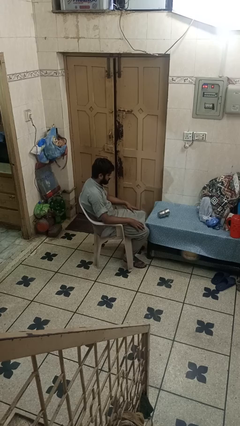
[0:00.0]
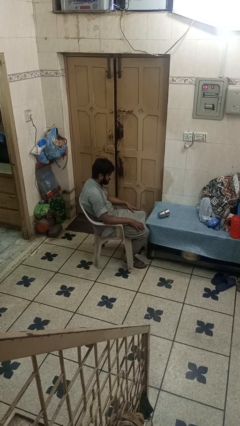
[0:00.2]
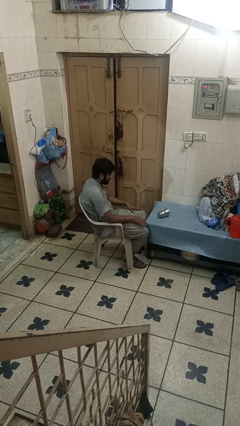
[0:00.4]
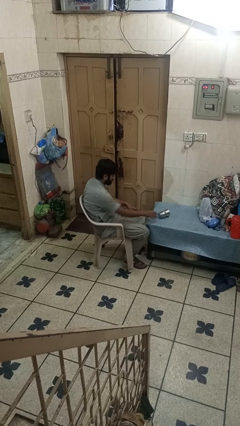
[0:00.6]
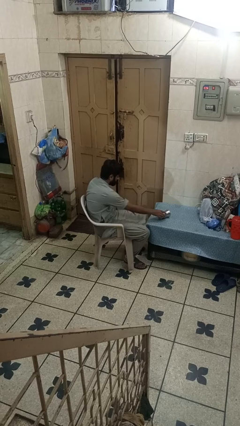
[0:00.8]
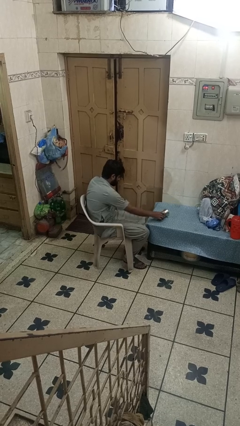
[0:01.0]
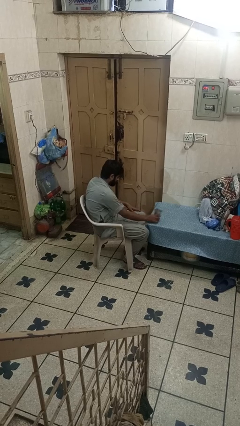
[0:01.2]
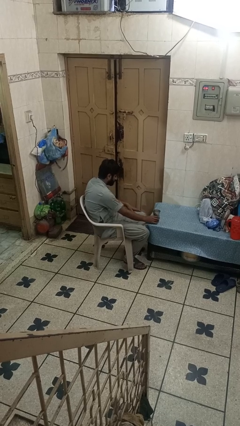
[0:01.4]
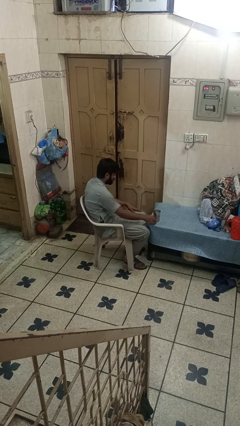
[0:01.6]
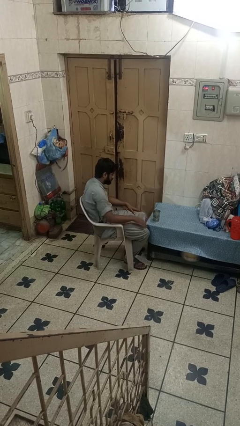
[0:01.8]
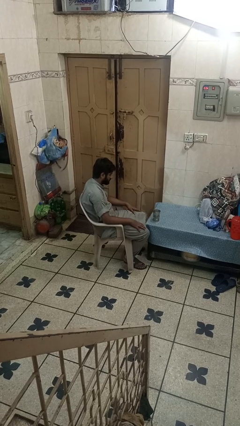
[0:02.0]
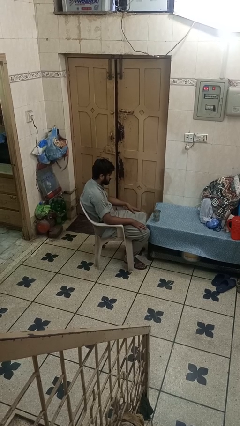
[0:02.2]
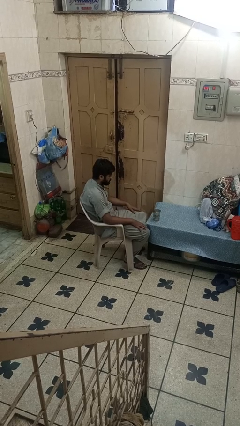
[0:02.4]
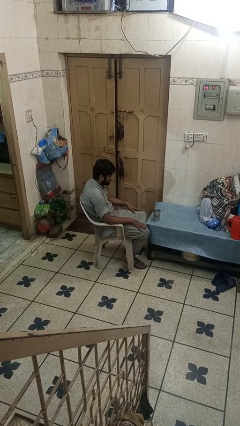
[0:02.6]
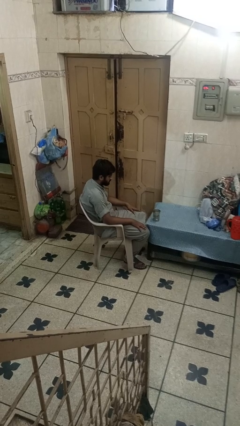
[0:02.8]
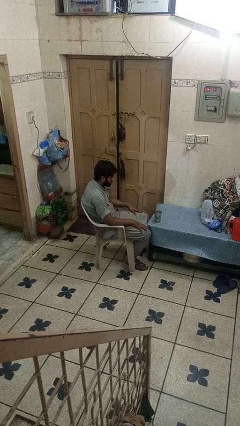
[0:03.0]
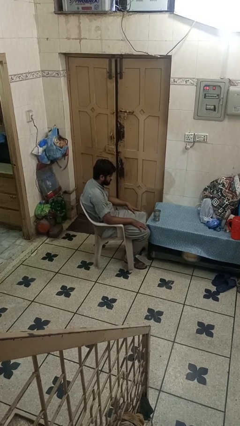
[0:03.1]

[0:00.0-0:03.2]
person sets upright glass

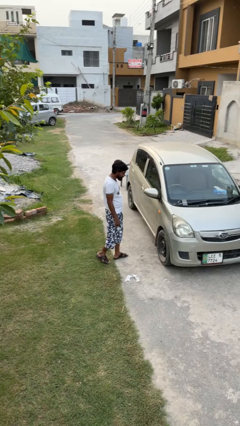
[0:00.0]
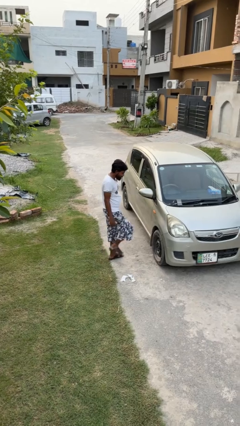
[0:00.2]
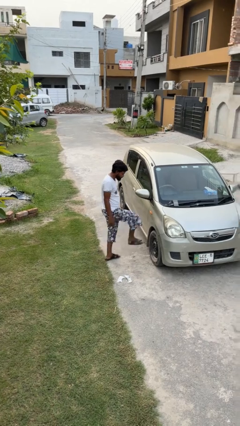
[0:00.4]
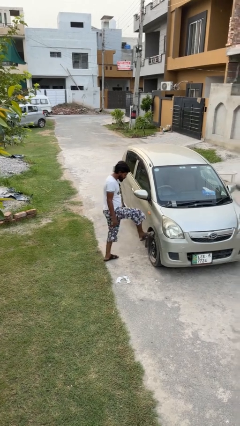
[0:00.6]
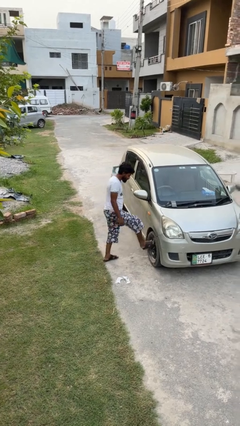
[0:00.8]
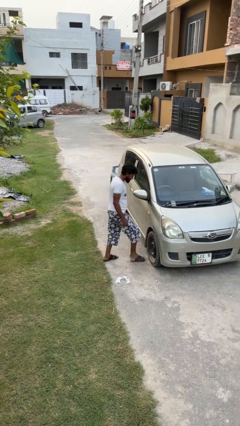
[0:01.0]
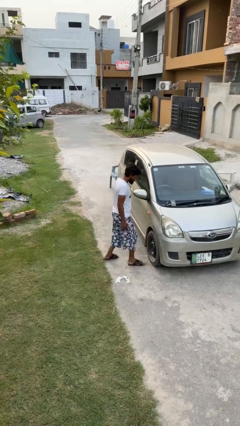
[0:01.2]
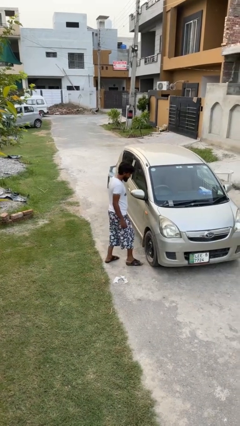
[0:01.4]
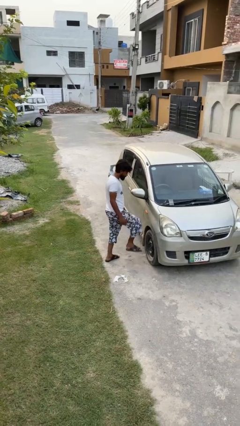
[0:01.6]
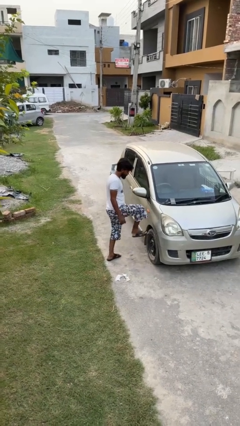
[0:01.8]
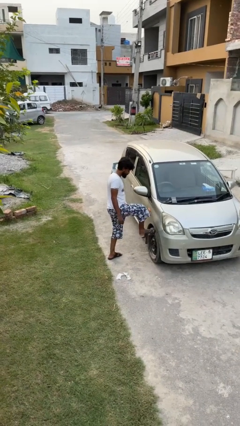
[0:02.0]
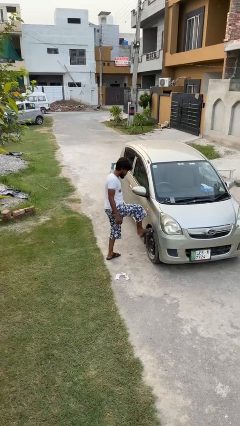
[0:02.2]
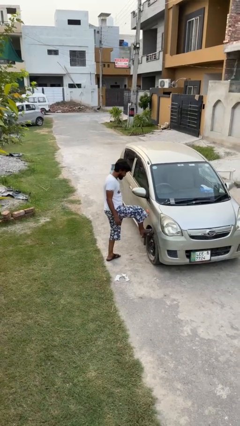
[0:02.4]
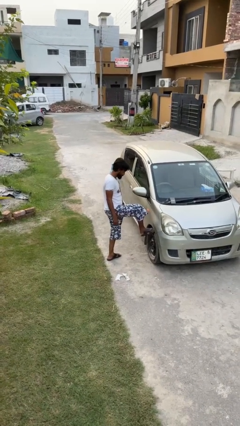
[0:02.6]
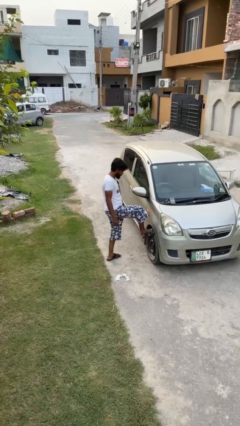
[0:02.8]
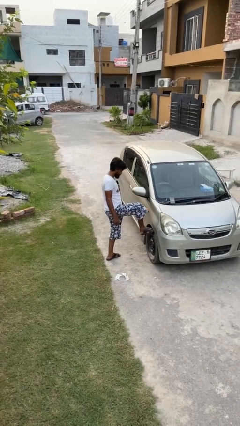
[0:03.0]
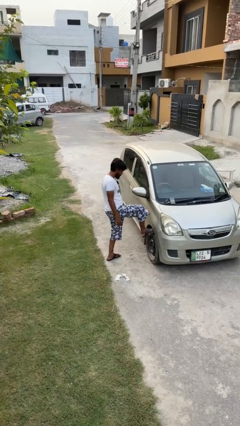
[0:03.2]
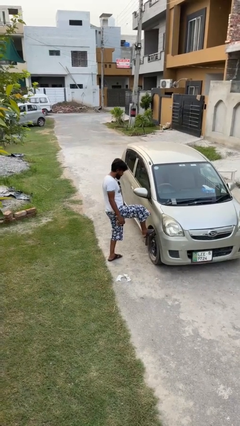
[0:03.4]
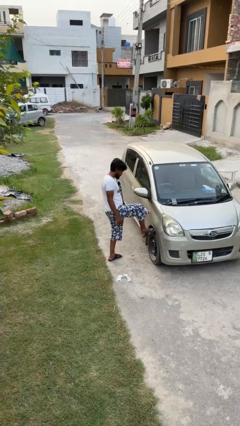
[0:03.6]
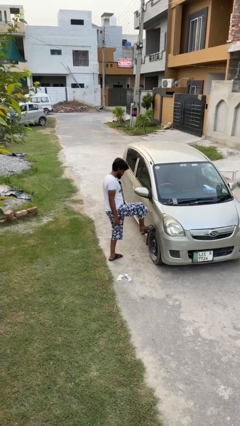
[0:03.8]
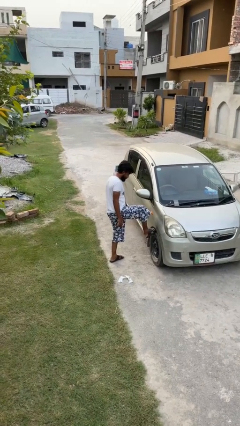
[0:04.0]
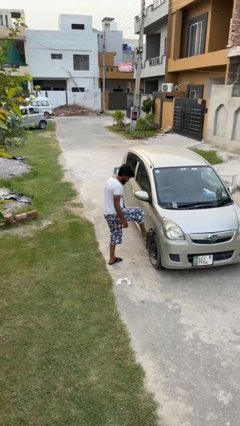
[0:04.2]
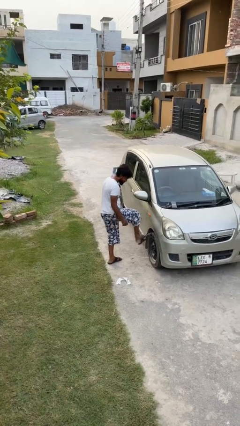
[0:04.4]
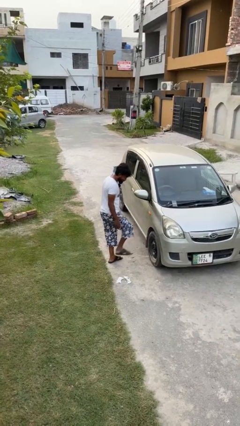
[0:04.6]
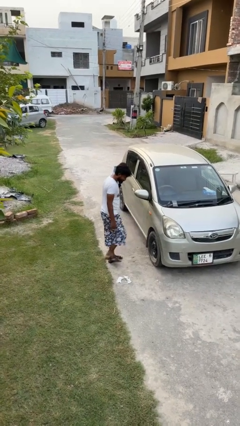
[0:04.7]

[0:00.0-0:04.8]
person kicks car tires

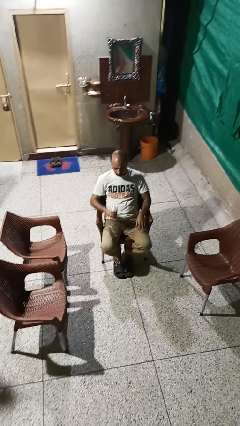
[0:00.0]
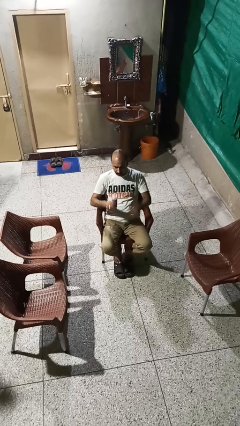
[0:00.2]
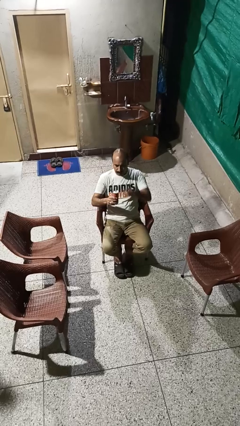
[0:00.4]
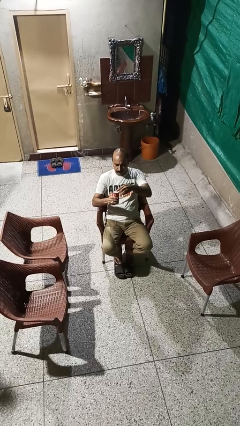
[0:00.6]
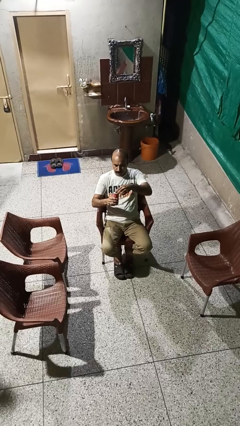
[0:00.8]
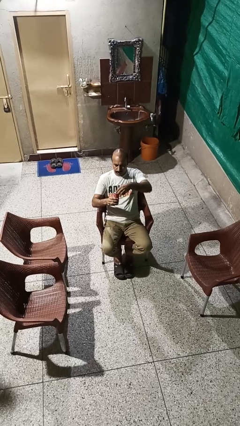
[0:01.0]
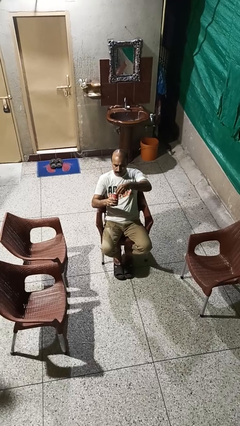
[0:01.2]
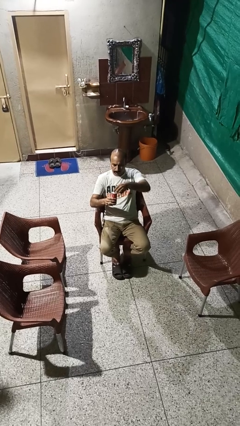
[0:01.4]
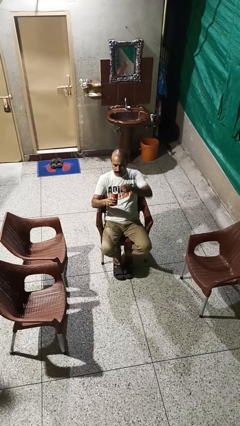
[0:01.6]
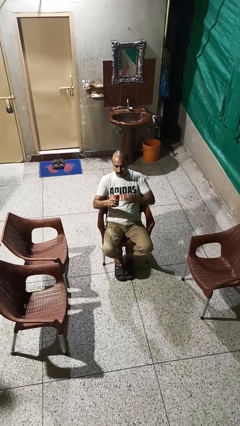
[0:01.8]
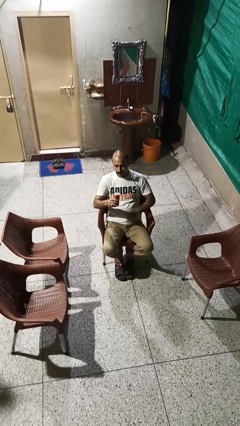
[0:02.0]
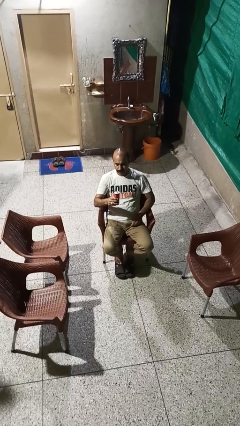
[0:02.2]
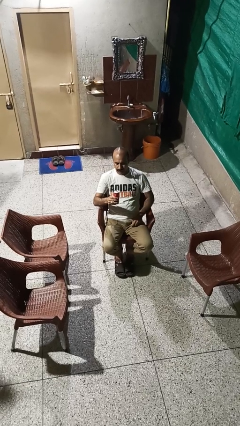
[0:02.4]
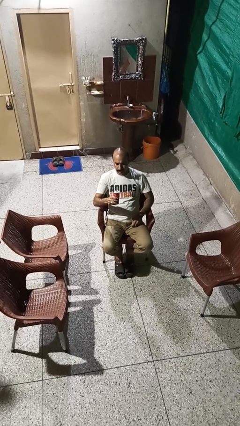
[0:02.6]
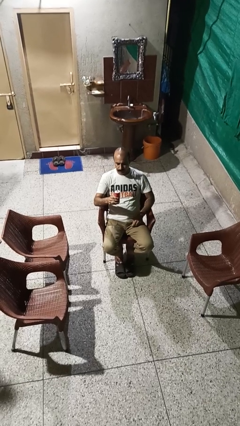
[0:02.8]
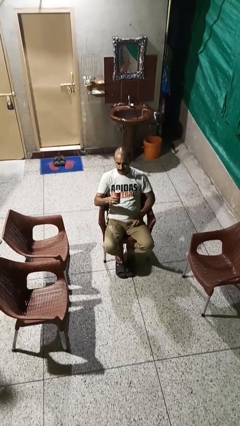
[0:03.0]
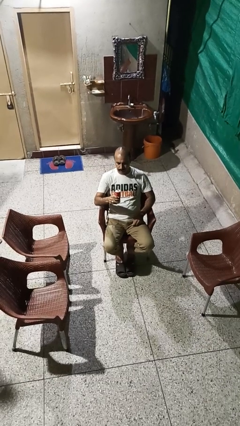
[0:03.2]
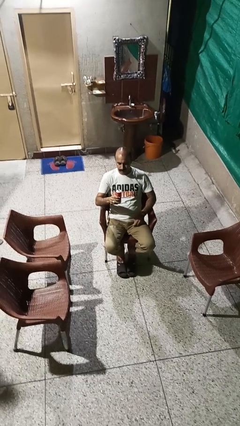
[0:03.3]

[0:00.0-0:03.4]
person opens beverage can

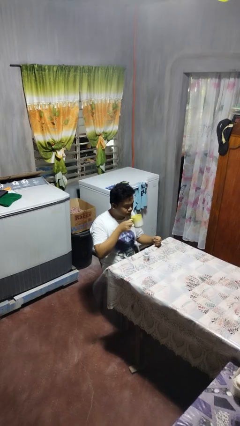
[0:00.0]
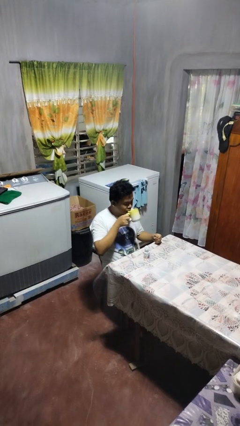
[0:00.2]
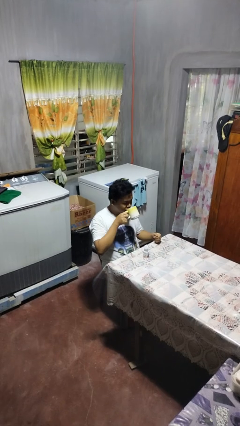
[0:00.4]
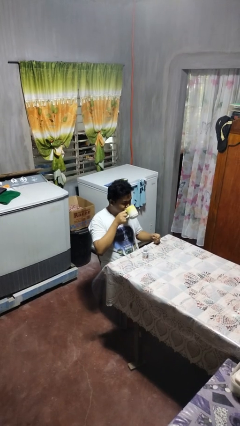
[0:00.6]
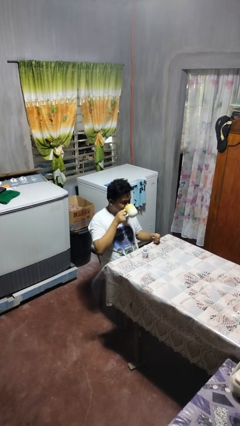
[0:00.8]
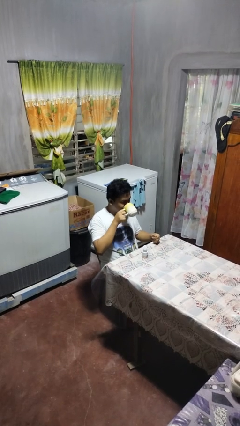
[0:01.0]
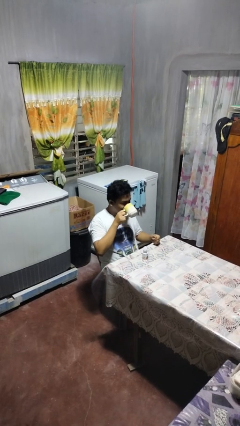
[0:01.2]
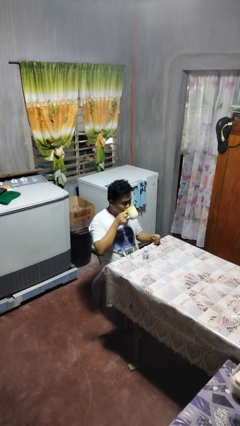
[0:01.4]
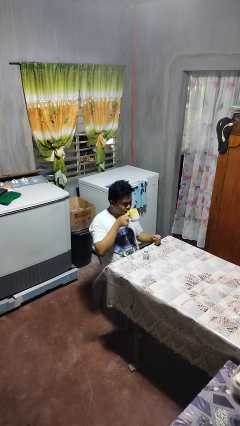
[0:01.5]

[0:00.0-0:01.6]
person drinks from cup

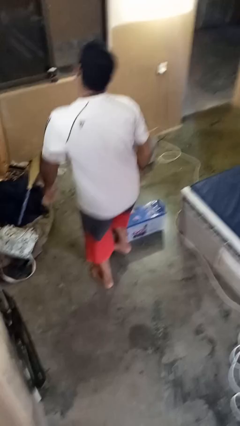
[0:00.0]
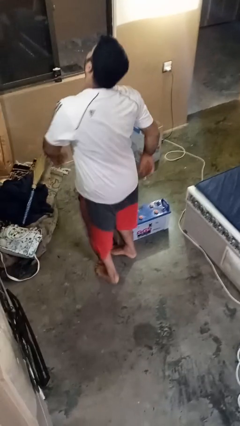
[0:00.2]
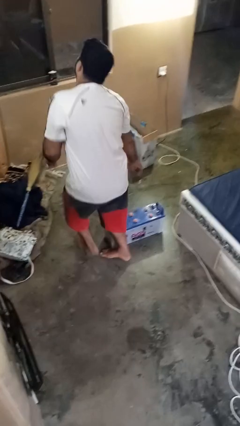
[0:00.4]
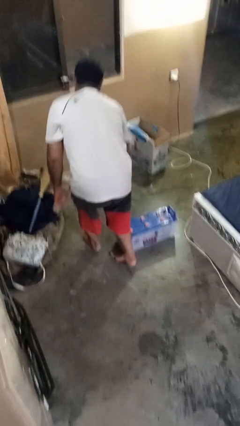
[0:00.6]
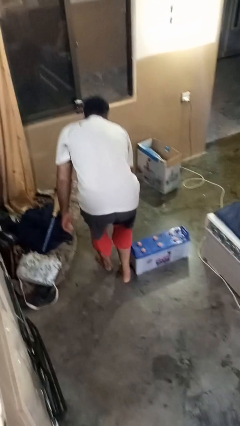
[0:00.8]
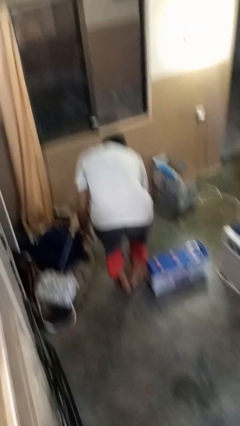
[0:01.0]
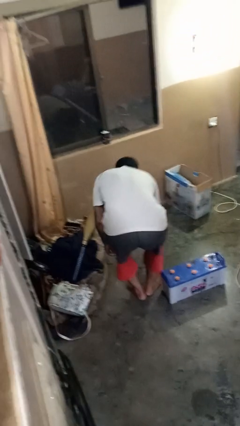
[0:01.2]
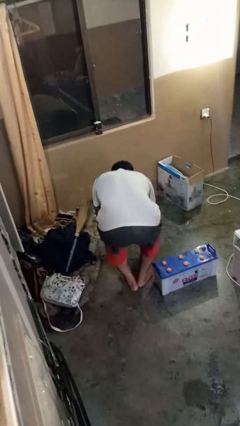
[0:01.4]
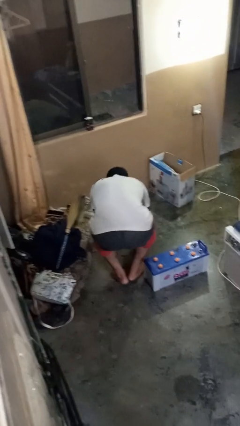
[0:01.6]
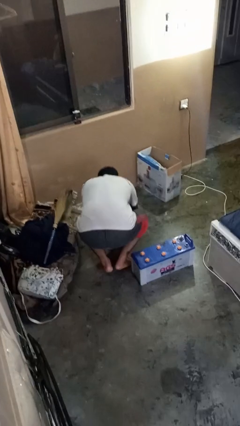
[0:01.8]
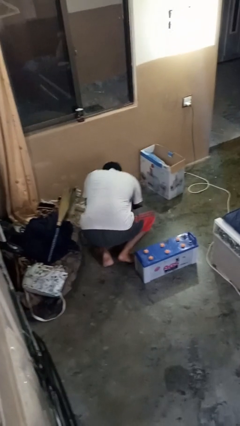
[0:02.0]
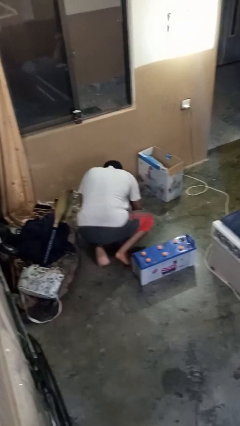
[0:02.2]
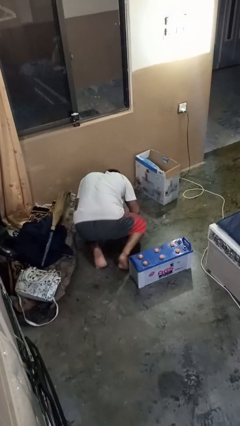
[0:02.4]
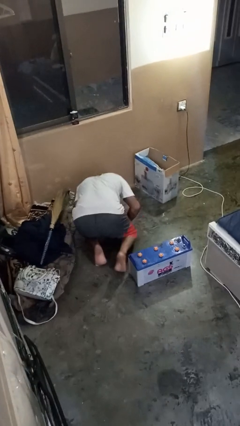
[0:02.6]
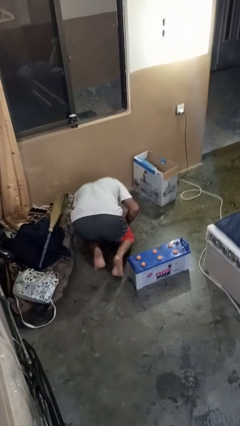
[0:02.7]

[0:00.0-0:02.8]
person trips on object on floor

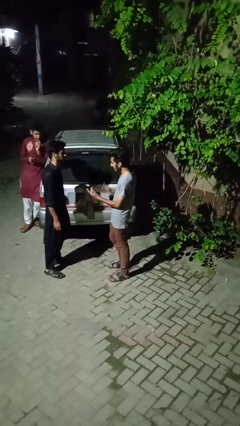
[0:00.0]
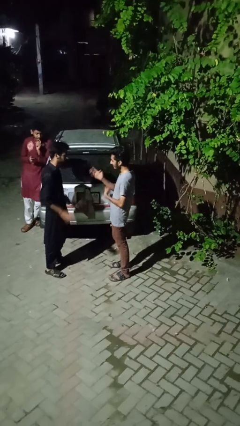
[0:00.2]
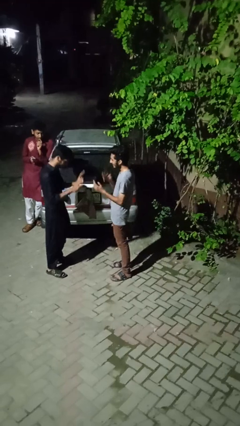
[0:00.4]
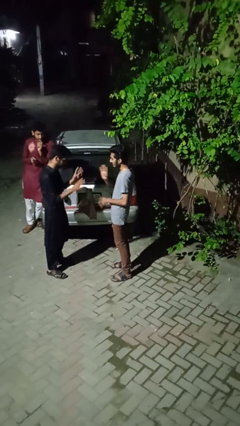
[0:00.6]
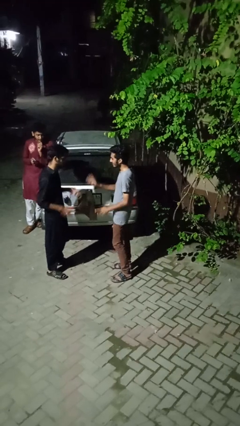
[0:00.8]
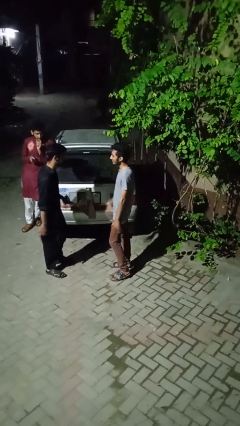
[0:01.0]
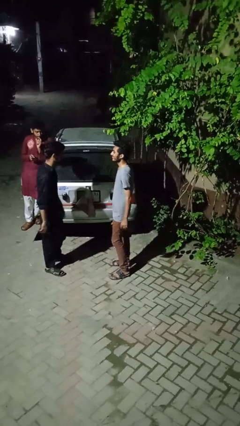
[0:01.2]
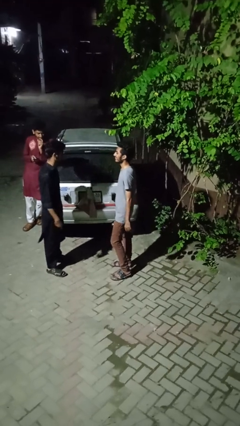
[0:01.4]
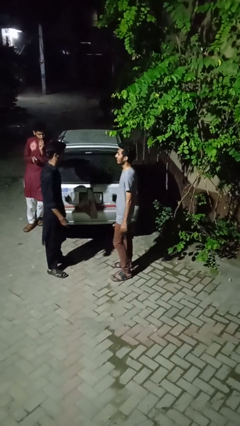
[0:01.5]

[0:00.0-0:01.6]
person talks to person

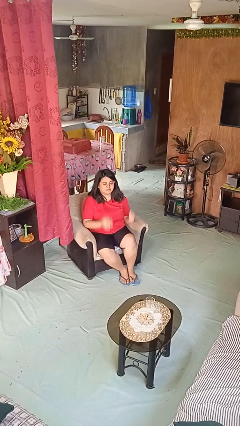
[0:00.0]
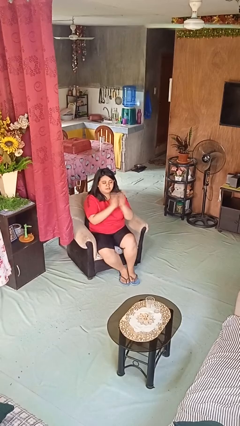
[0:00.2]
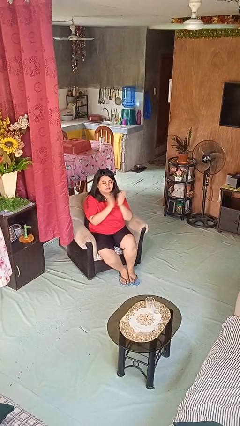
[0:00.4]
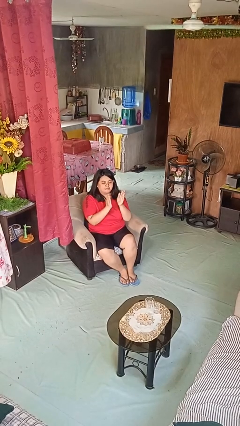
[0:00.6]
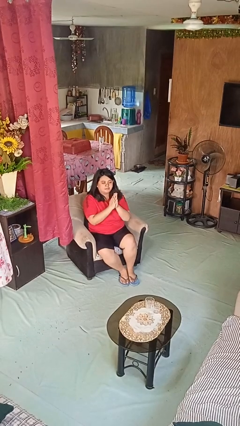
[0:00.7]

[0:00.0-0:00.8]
person claps hands
